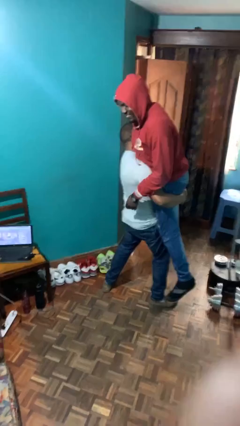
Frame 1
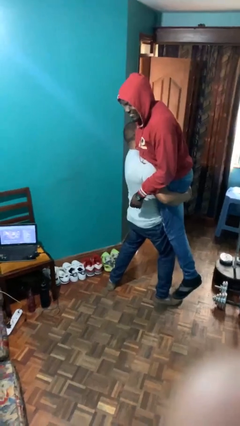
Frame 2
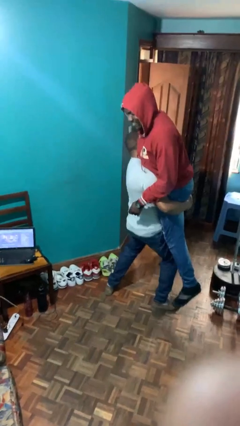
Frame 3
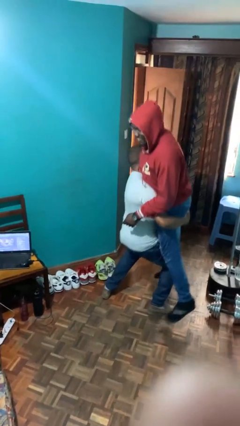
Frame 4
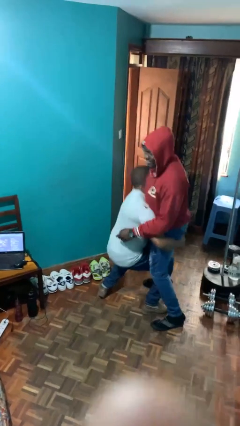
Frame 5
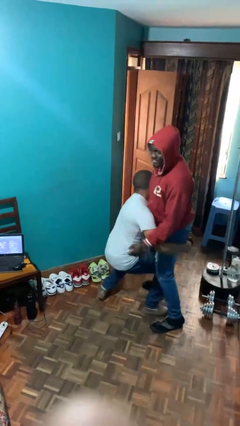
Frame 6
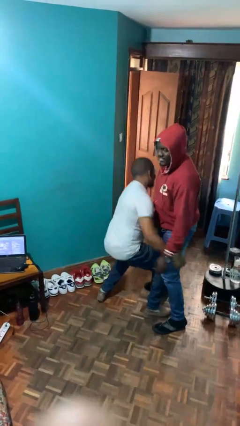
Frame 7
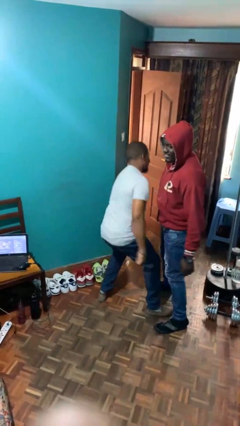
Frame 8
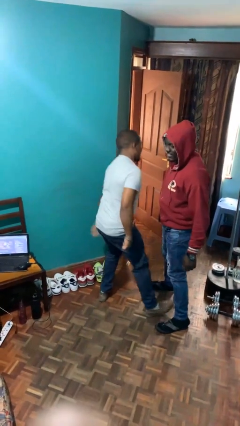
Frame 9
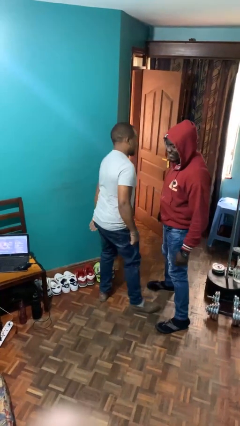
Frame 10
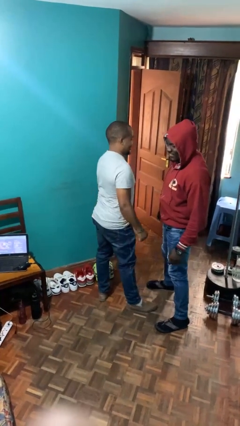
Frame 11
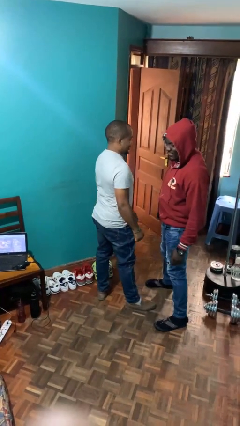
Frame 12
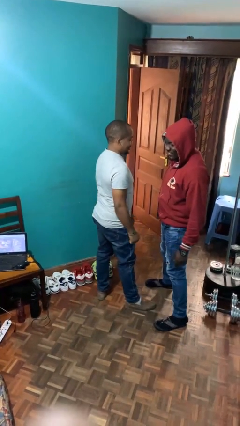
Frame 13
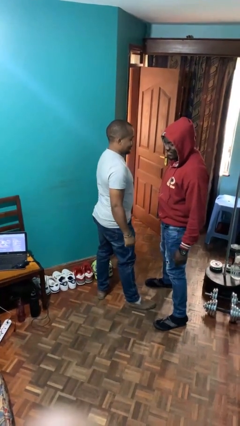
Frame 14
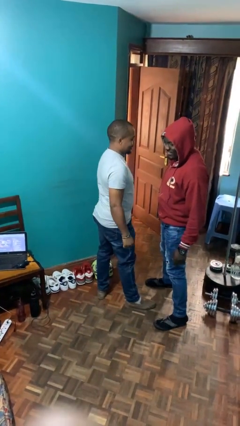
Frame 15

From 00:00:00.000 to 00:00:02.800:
person puts down person

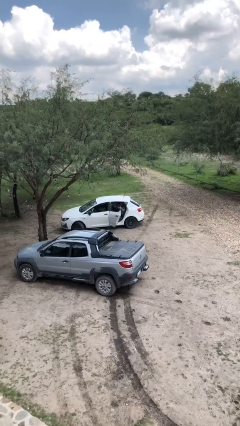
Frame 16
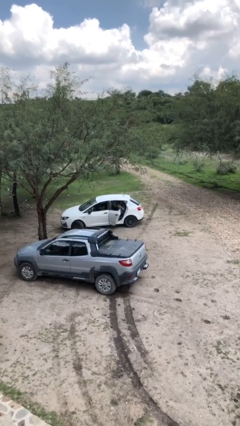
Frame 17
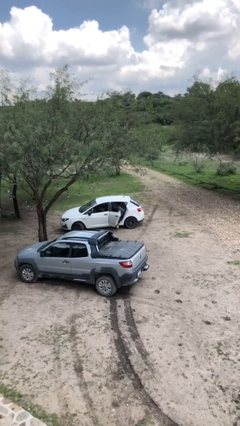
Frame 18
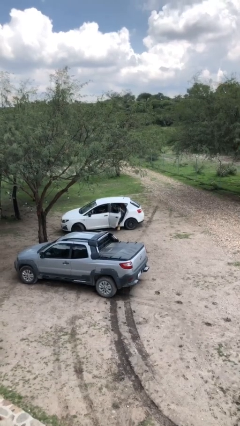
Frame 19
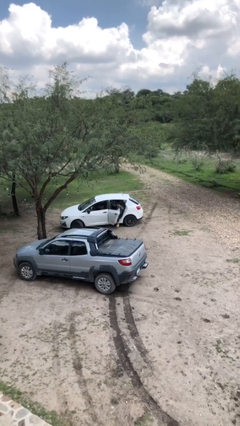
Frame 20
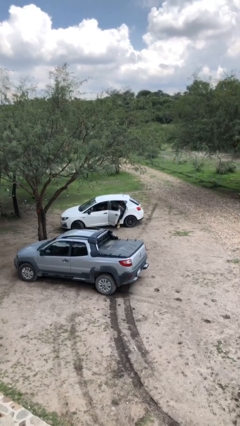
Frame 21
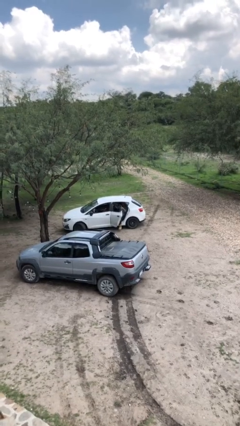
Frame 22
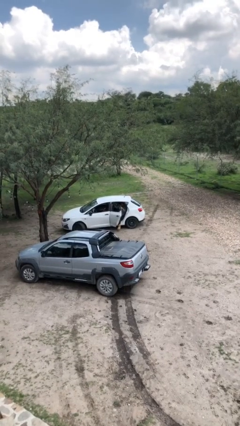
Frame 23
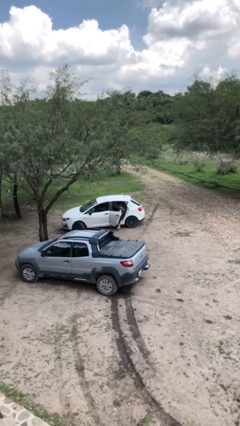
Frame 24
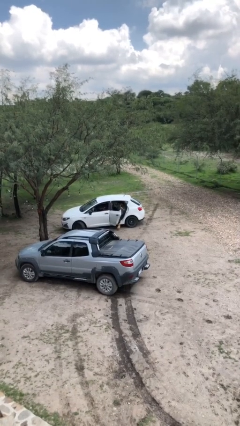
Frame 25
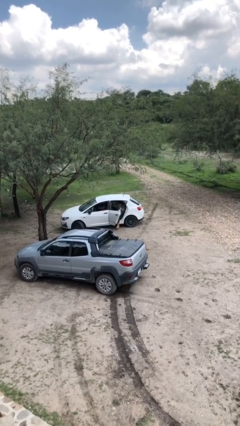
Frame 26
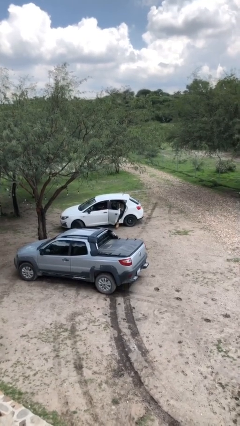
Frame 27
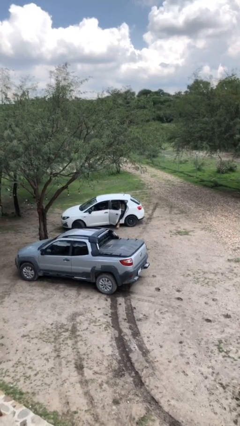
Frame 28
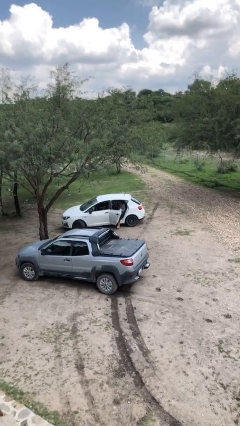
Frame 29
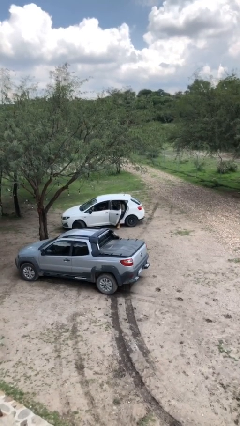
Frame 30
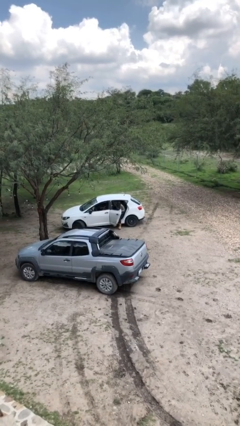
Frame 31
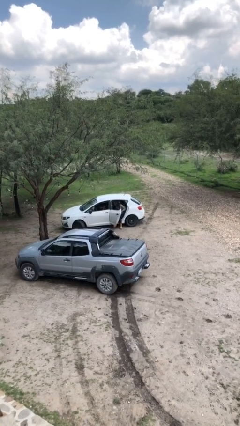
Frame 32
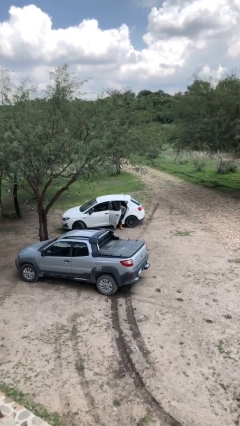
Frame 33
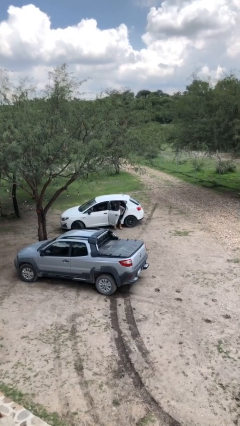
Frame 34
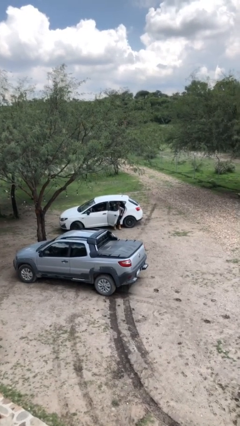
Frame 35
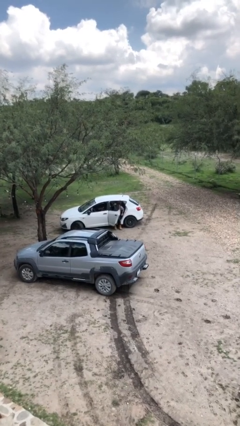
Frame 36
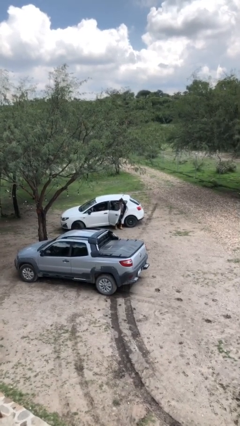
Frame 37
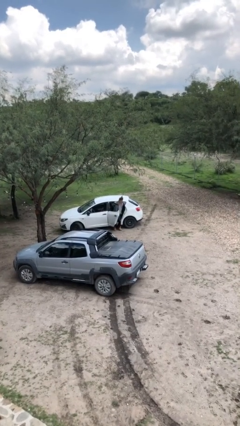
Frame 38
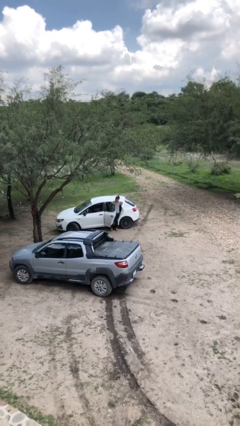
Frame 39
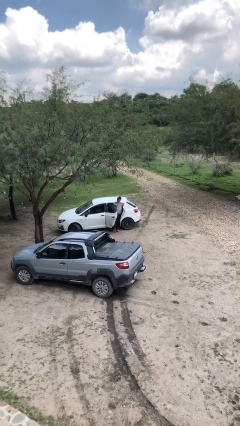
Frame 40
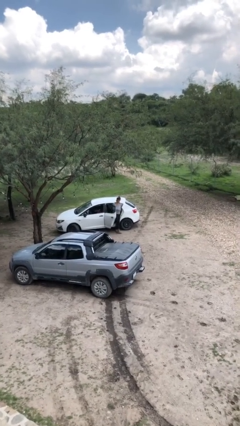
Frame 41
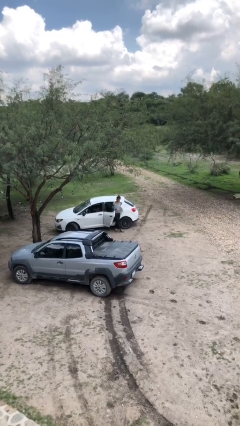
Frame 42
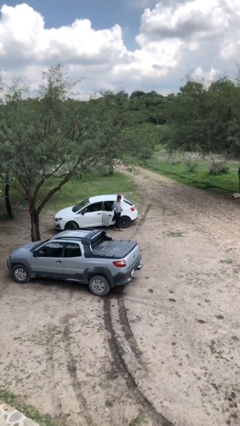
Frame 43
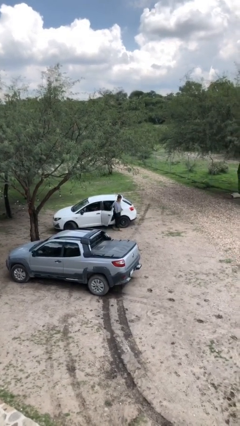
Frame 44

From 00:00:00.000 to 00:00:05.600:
person exits car

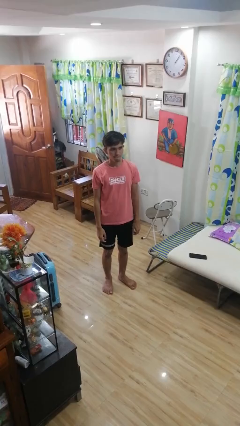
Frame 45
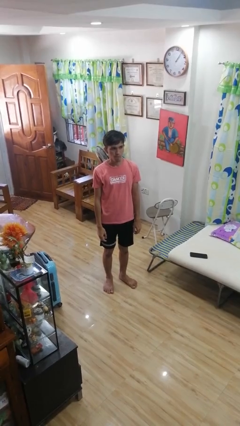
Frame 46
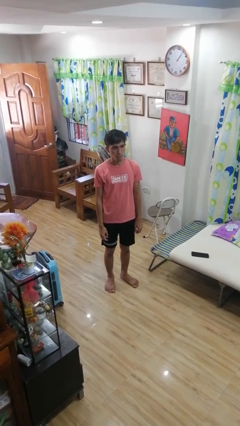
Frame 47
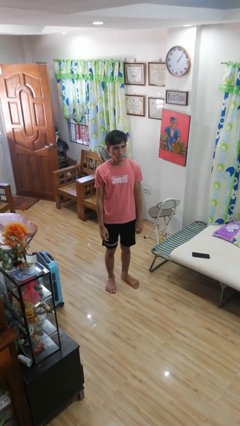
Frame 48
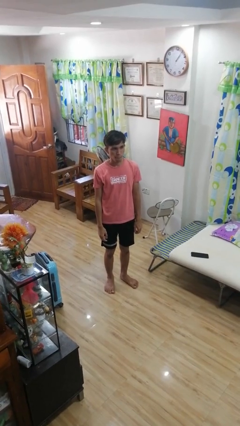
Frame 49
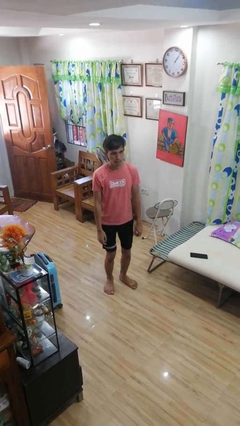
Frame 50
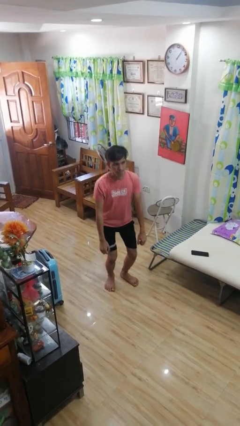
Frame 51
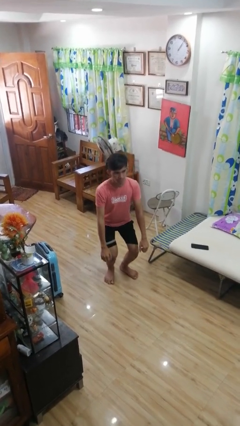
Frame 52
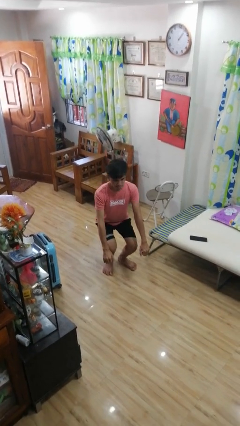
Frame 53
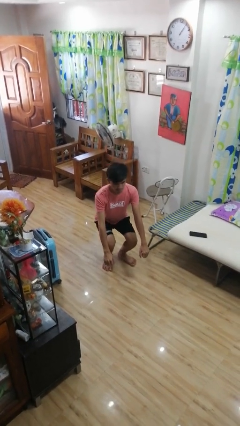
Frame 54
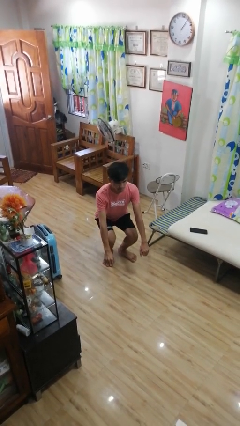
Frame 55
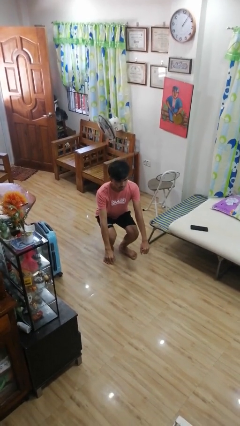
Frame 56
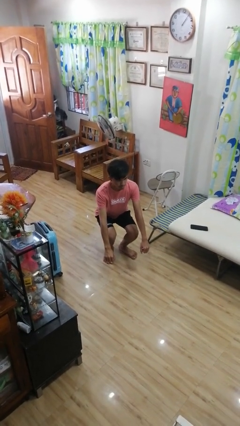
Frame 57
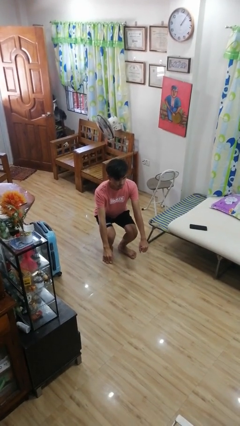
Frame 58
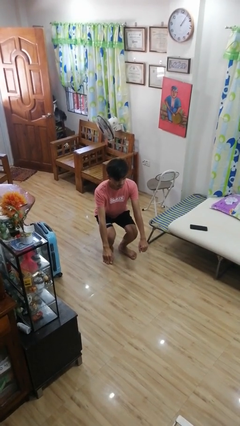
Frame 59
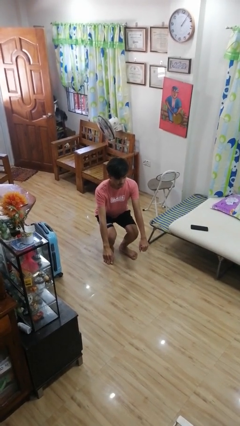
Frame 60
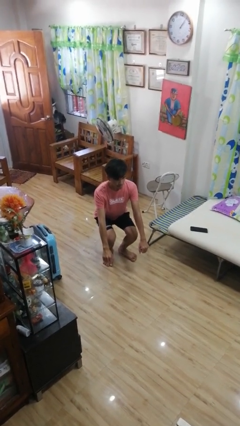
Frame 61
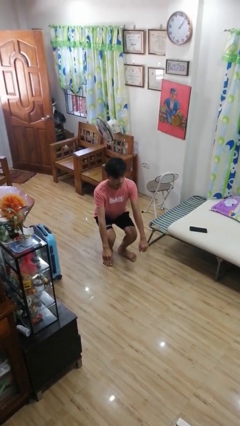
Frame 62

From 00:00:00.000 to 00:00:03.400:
person squats

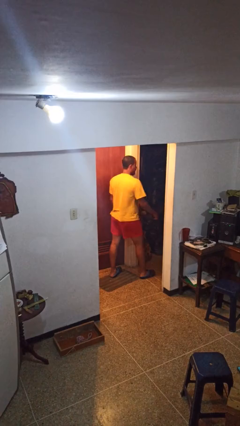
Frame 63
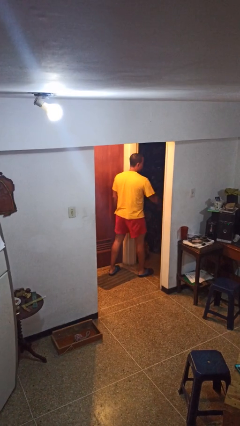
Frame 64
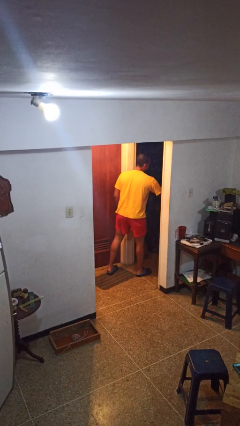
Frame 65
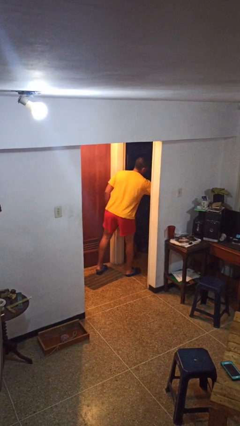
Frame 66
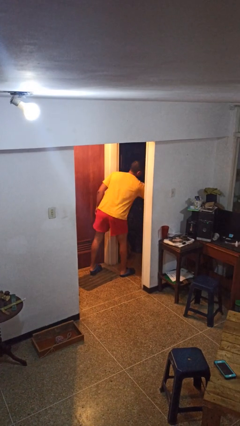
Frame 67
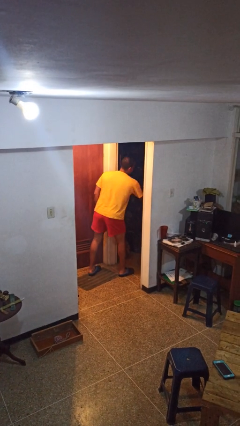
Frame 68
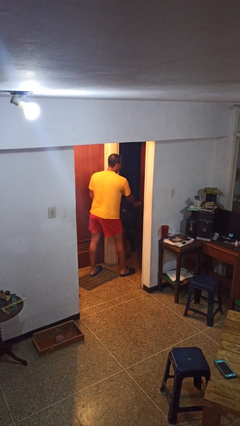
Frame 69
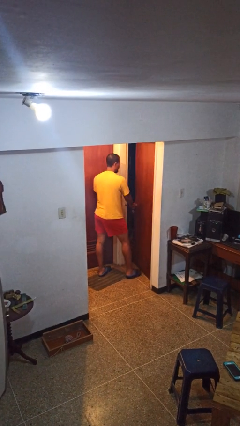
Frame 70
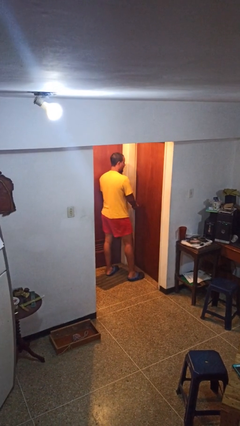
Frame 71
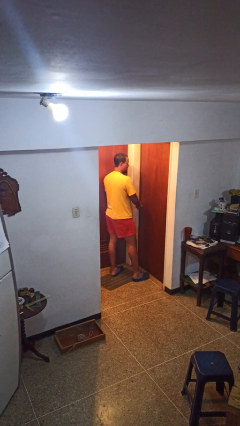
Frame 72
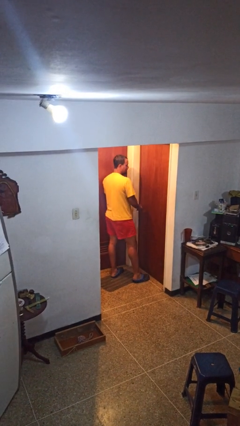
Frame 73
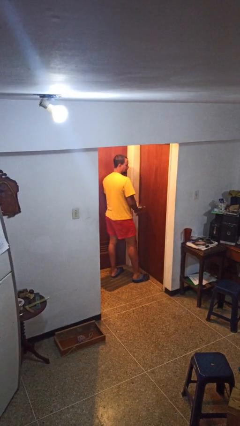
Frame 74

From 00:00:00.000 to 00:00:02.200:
person closes facility door

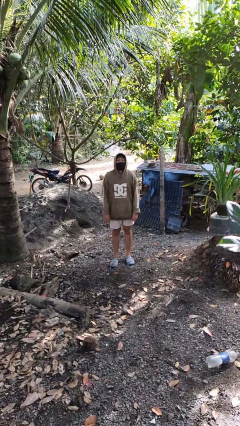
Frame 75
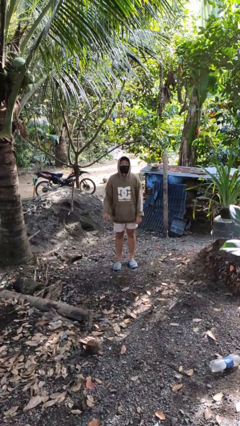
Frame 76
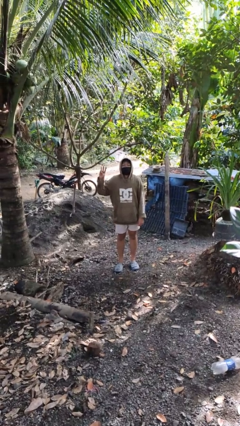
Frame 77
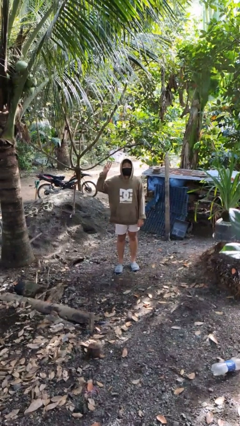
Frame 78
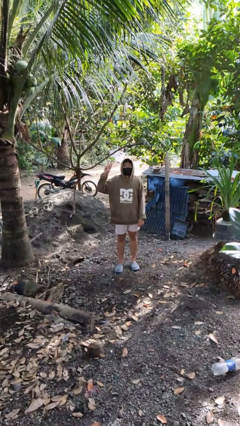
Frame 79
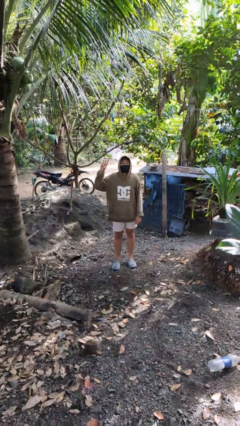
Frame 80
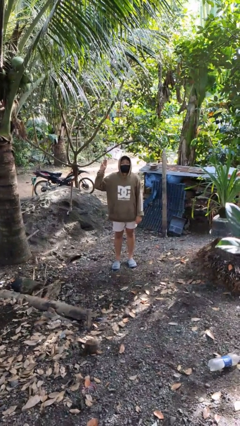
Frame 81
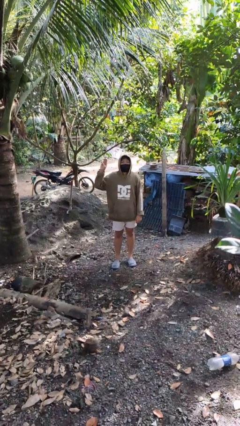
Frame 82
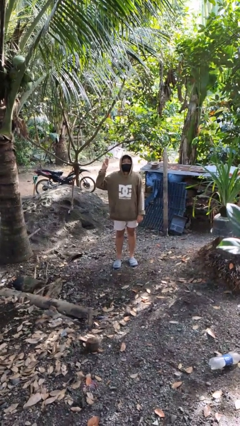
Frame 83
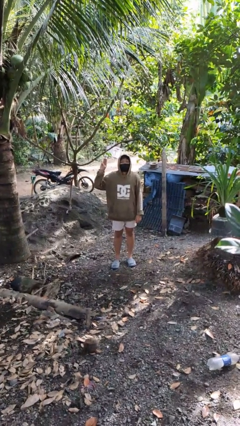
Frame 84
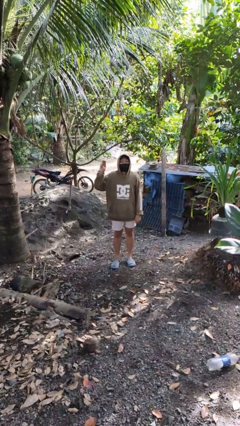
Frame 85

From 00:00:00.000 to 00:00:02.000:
person gestures number three

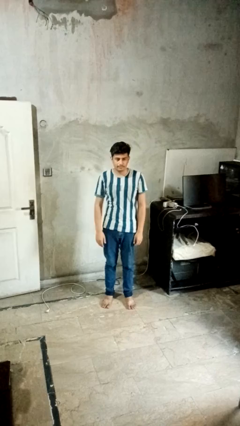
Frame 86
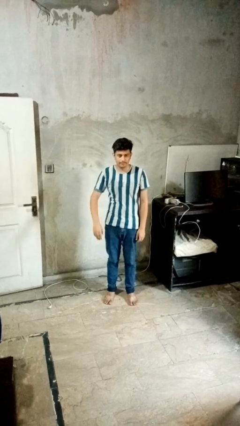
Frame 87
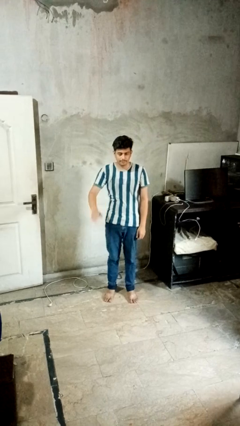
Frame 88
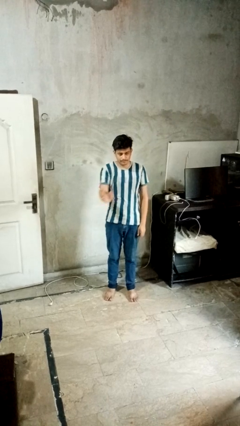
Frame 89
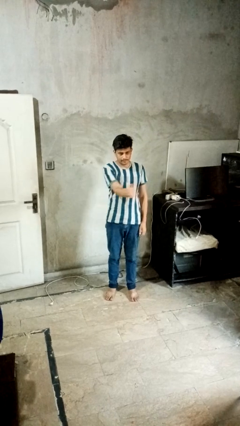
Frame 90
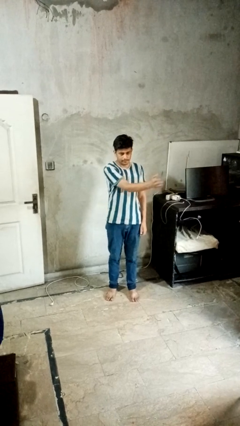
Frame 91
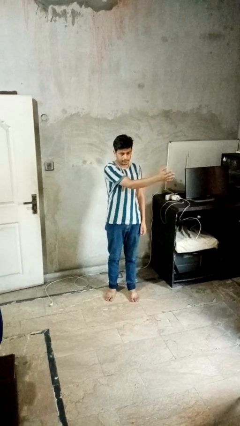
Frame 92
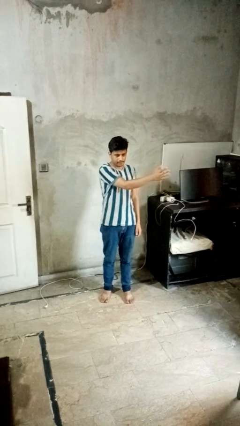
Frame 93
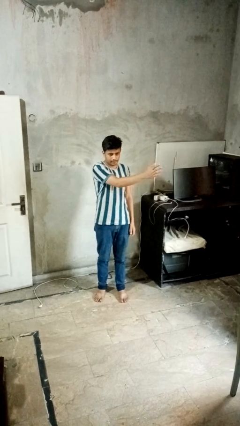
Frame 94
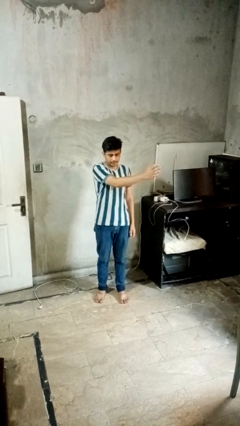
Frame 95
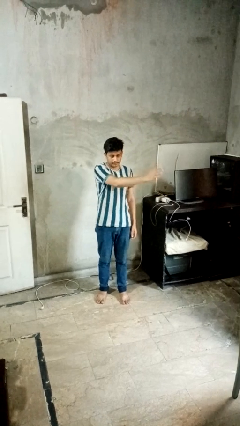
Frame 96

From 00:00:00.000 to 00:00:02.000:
person gestures swipe left
